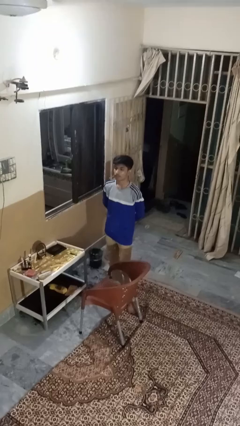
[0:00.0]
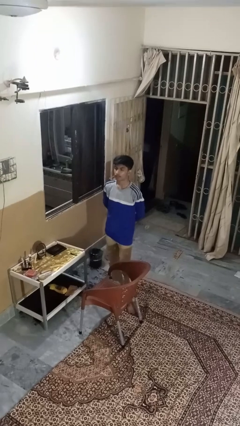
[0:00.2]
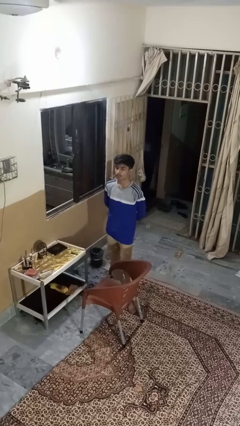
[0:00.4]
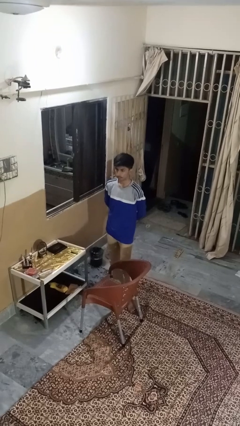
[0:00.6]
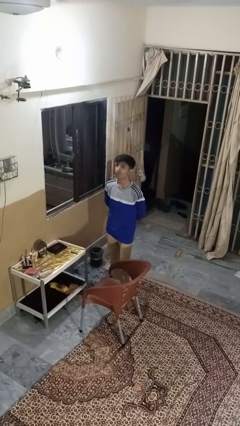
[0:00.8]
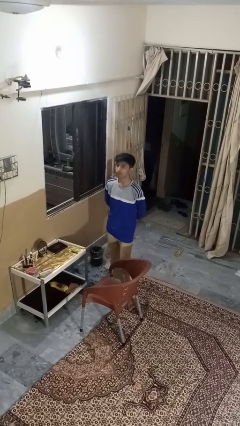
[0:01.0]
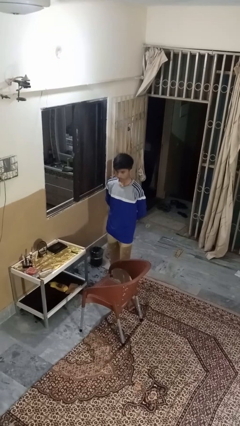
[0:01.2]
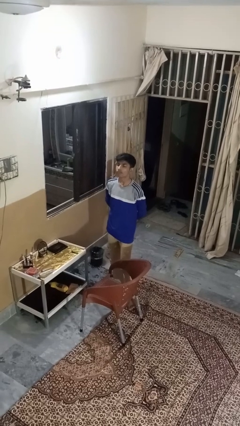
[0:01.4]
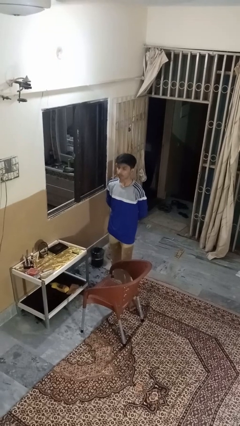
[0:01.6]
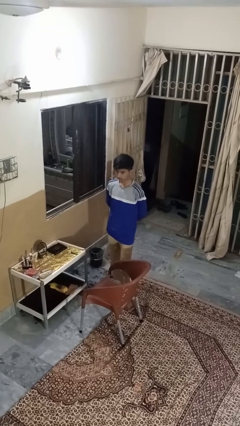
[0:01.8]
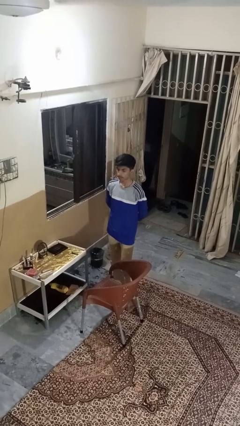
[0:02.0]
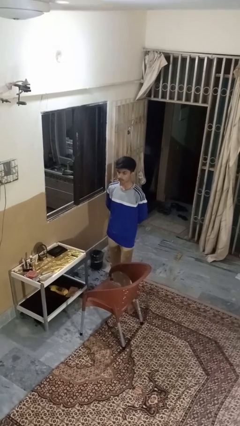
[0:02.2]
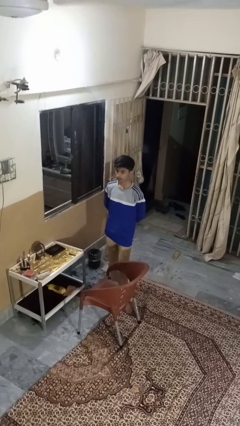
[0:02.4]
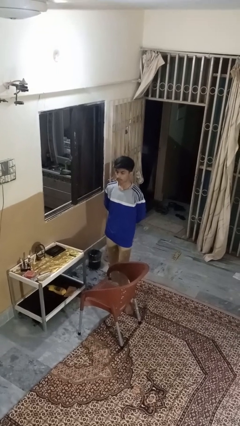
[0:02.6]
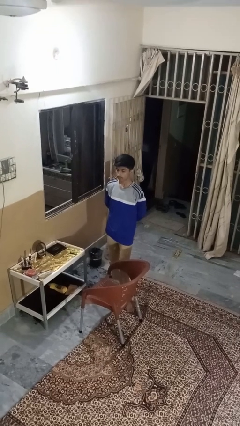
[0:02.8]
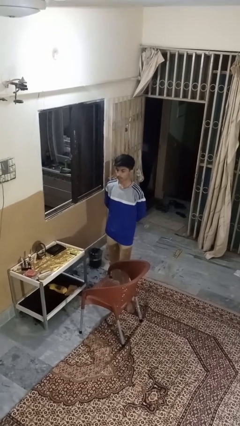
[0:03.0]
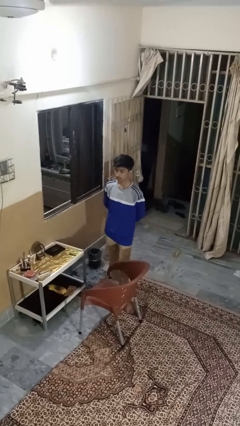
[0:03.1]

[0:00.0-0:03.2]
person nods head

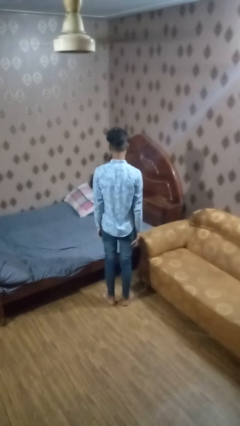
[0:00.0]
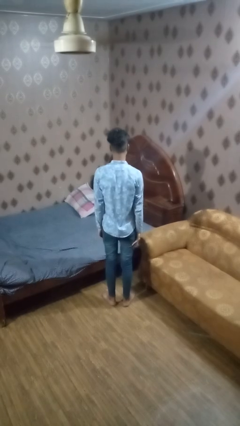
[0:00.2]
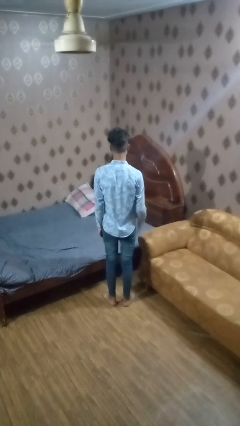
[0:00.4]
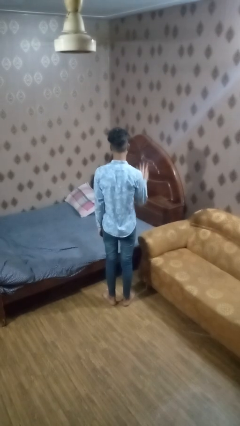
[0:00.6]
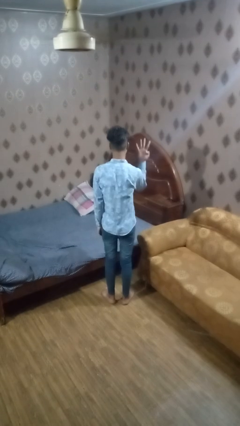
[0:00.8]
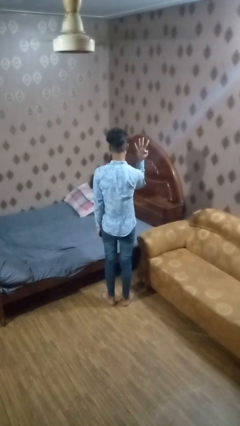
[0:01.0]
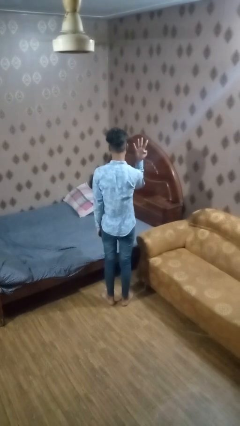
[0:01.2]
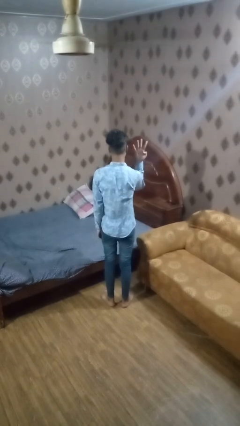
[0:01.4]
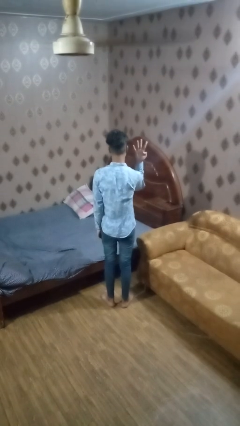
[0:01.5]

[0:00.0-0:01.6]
person gestures number four

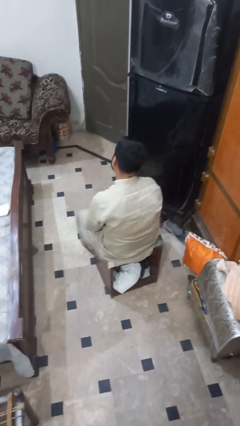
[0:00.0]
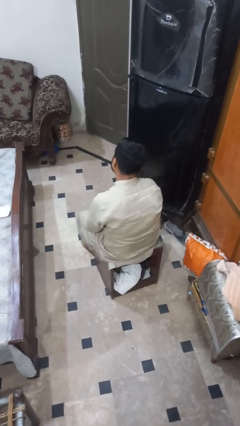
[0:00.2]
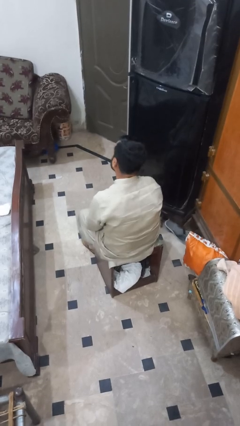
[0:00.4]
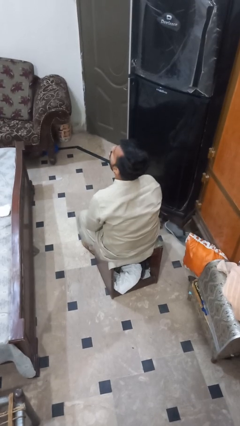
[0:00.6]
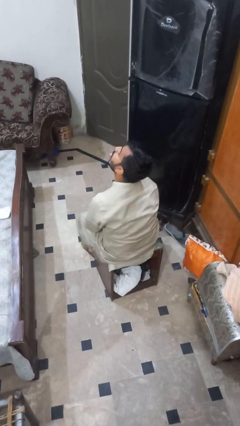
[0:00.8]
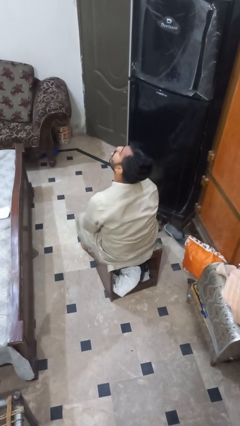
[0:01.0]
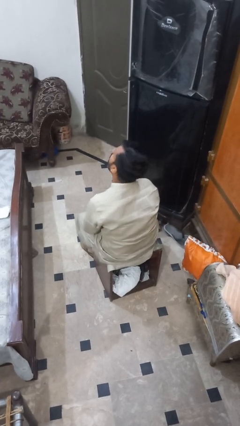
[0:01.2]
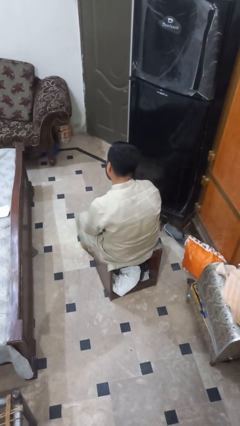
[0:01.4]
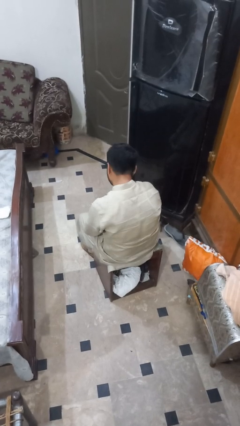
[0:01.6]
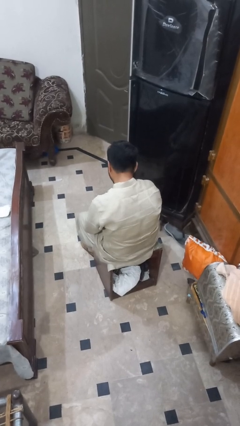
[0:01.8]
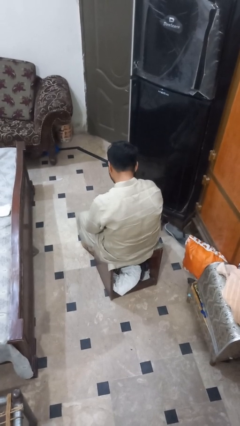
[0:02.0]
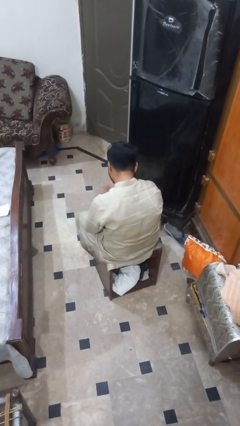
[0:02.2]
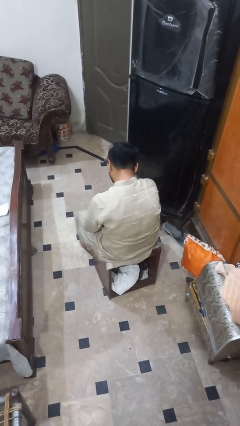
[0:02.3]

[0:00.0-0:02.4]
person sticks out tongue

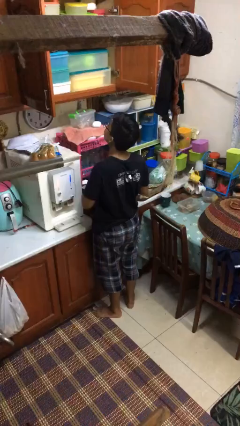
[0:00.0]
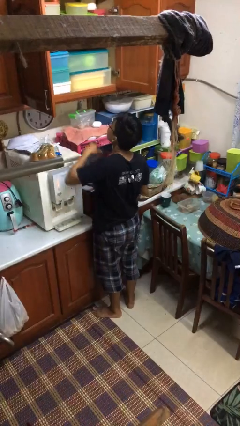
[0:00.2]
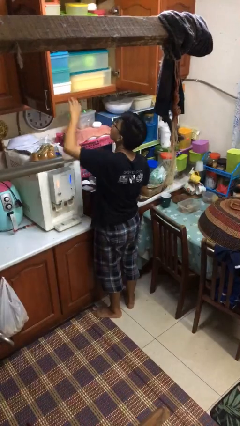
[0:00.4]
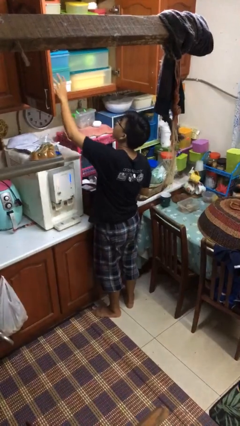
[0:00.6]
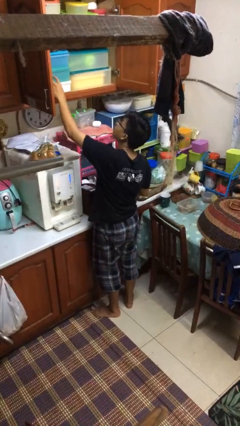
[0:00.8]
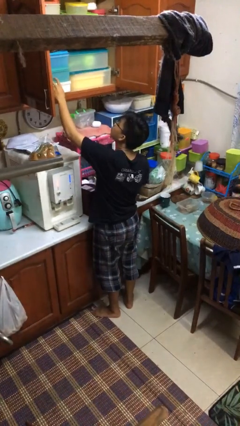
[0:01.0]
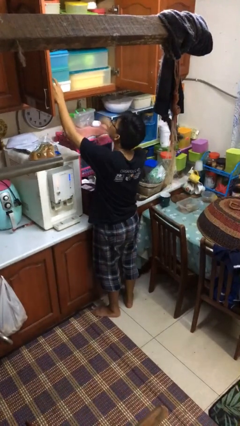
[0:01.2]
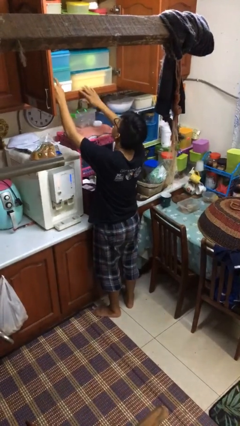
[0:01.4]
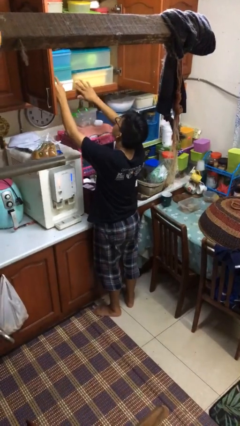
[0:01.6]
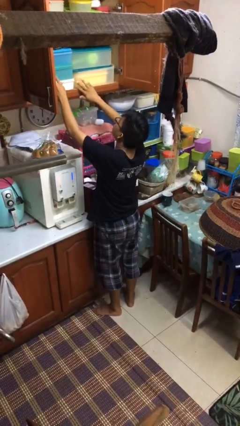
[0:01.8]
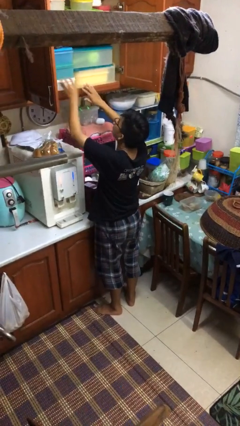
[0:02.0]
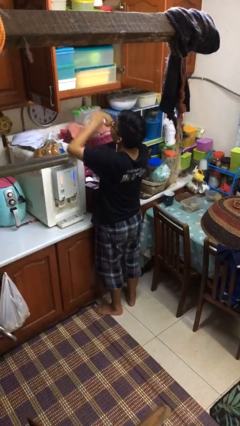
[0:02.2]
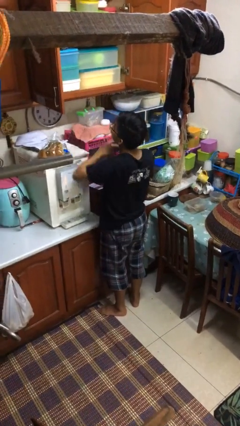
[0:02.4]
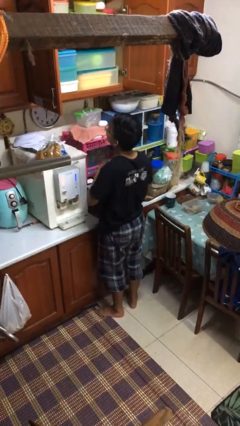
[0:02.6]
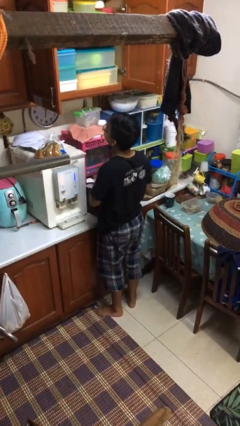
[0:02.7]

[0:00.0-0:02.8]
person searches in kitchen drawer

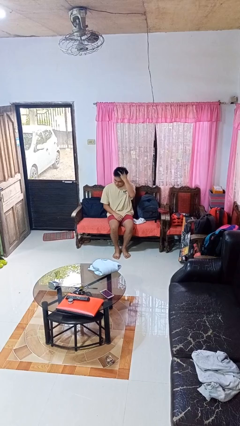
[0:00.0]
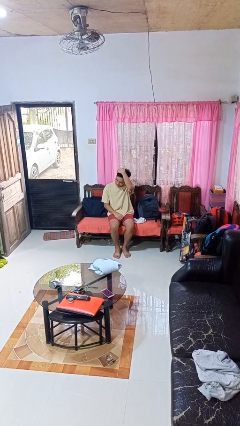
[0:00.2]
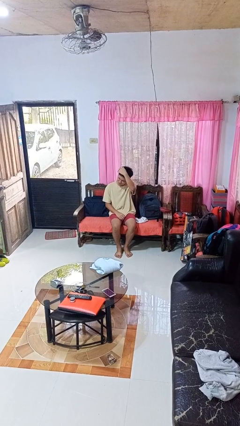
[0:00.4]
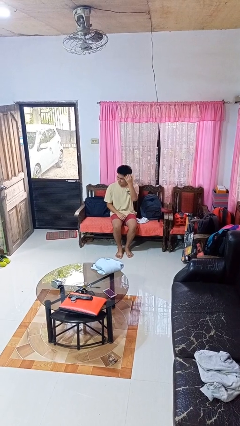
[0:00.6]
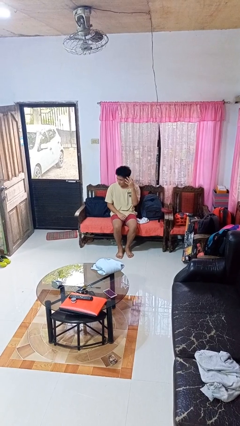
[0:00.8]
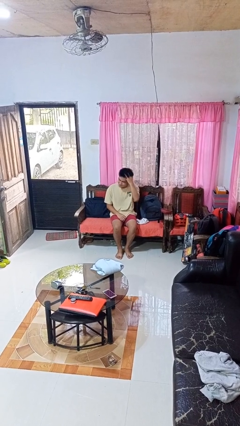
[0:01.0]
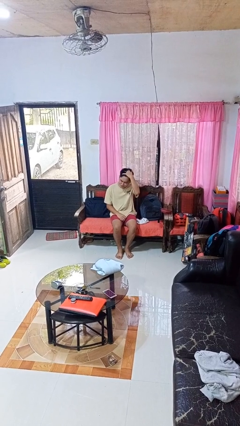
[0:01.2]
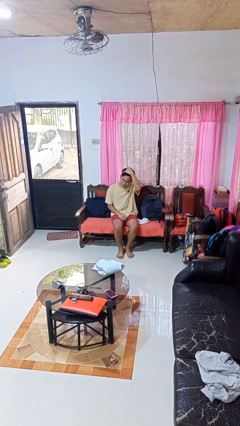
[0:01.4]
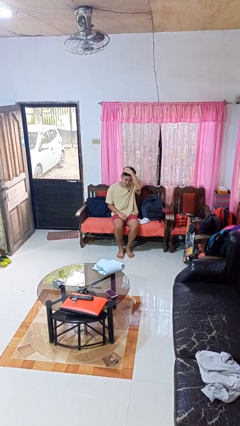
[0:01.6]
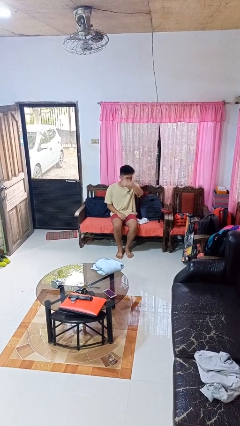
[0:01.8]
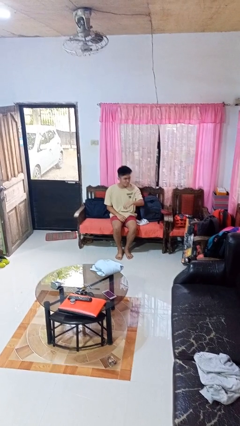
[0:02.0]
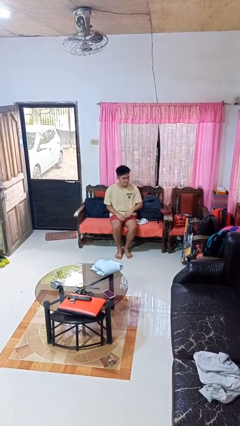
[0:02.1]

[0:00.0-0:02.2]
person strokes hair

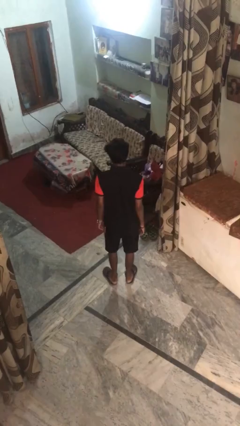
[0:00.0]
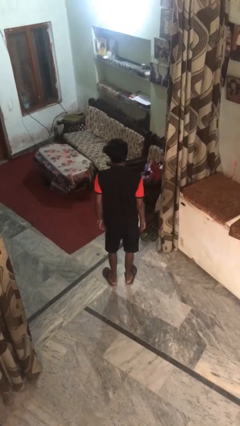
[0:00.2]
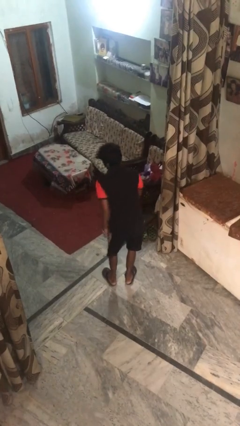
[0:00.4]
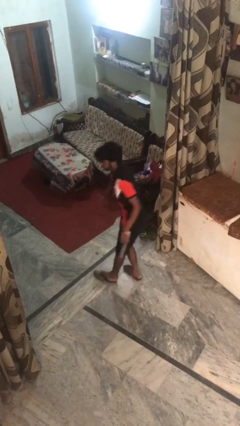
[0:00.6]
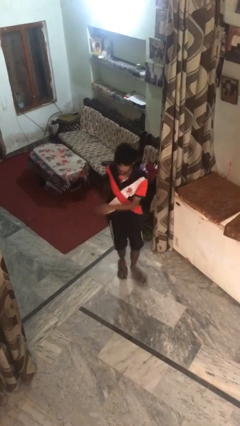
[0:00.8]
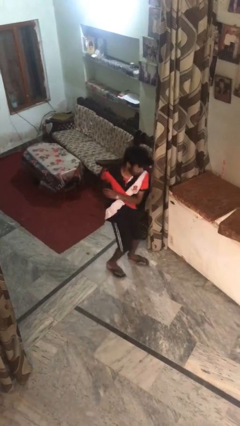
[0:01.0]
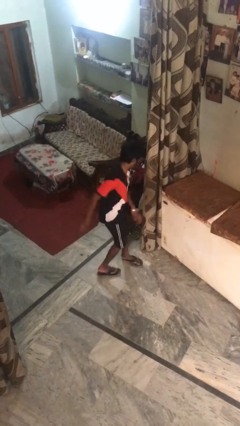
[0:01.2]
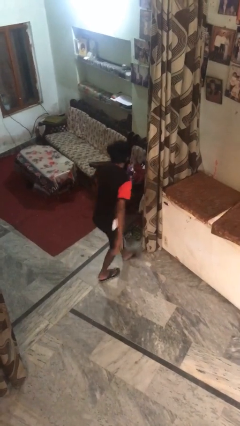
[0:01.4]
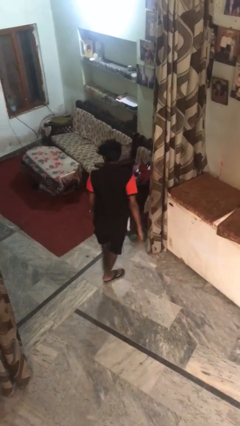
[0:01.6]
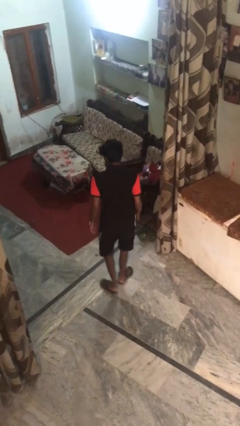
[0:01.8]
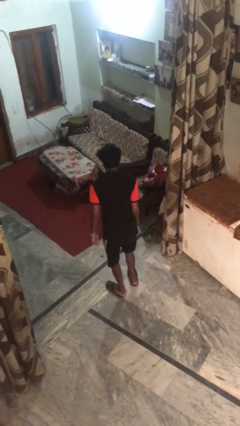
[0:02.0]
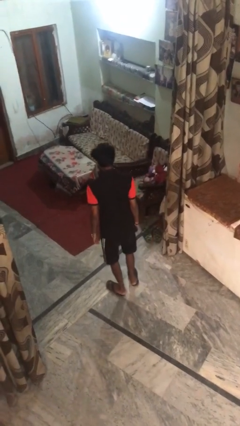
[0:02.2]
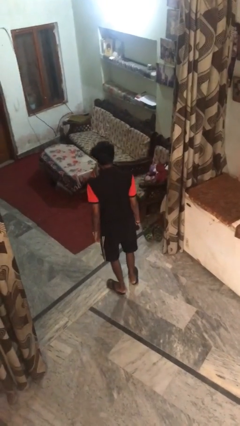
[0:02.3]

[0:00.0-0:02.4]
person twirls

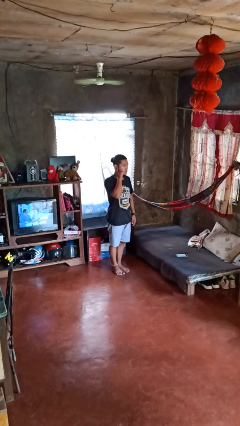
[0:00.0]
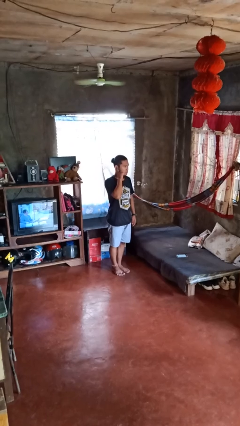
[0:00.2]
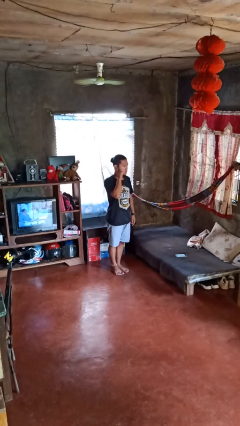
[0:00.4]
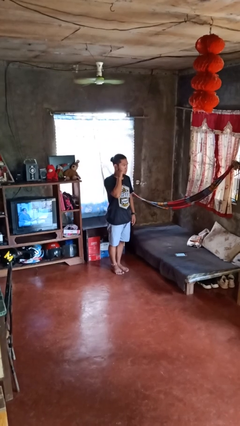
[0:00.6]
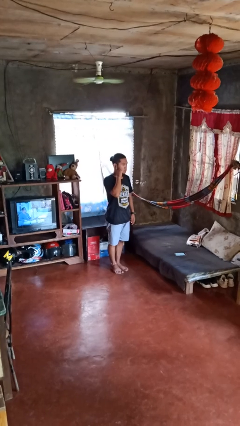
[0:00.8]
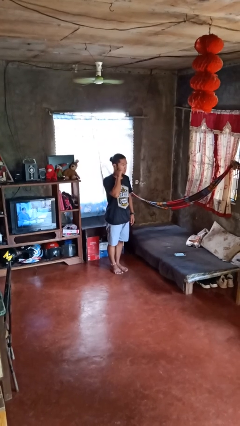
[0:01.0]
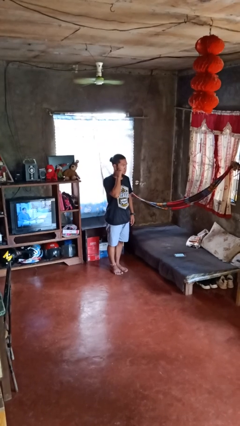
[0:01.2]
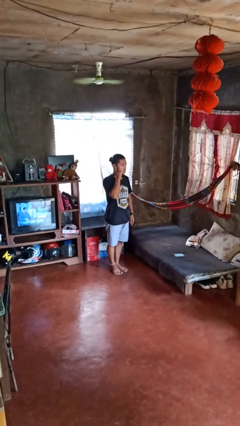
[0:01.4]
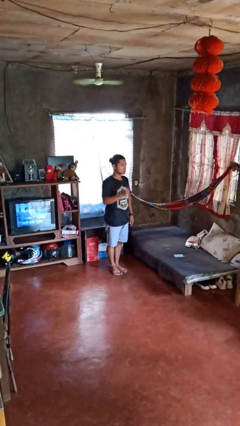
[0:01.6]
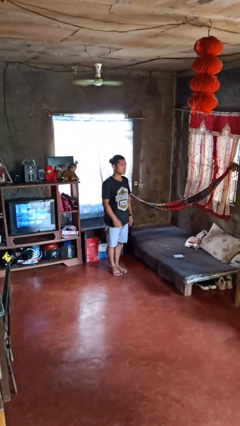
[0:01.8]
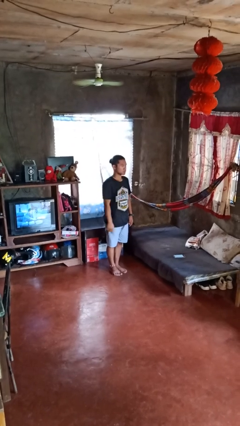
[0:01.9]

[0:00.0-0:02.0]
person gestures listen closely

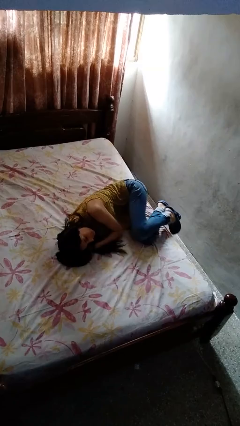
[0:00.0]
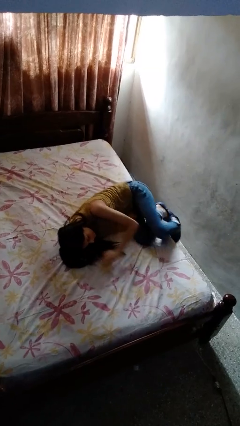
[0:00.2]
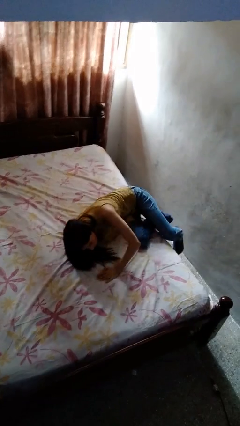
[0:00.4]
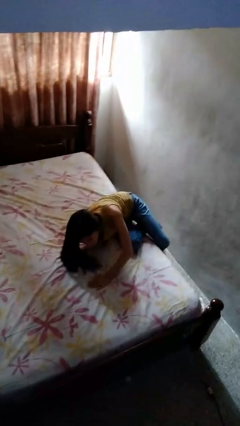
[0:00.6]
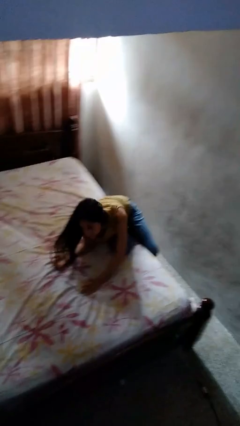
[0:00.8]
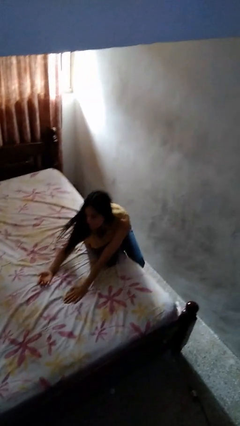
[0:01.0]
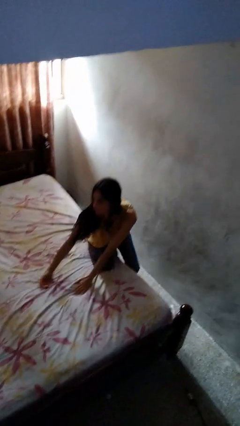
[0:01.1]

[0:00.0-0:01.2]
person stands up
